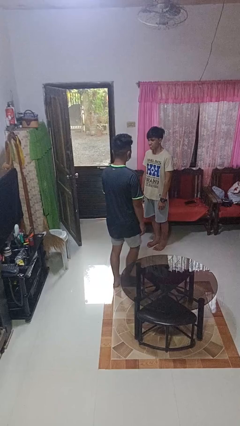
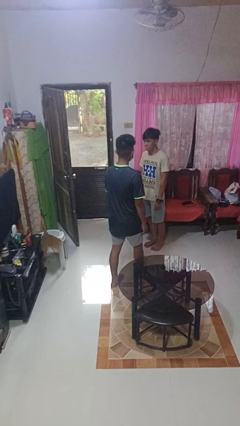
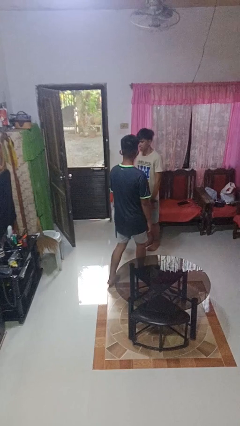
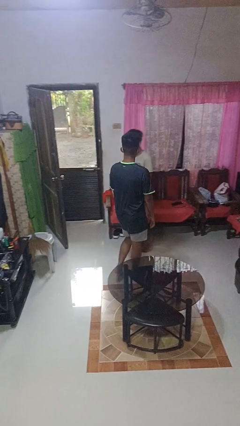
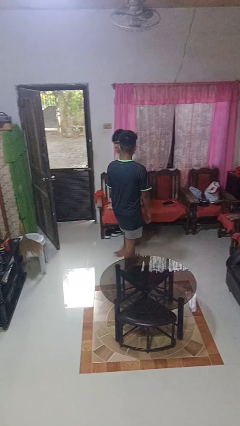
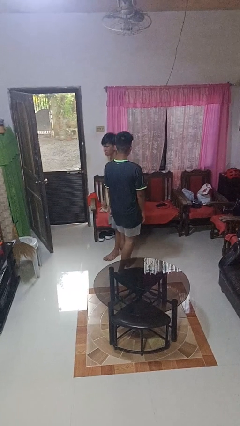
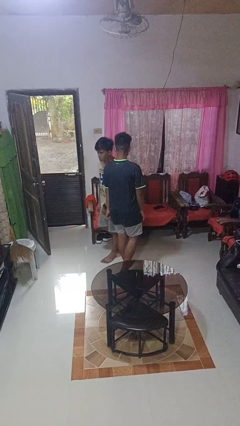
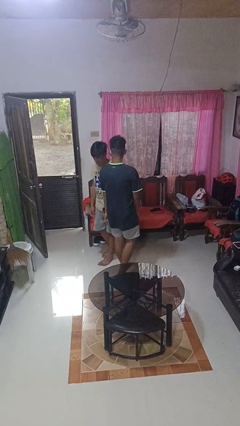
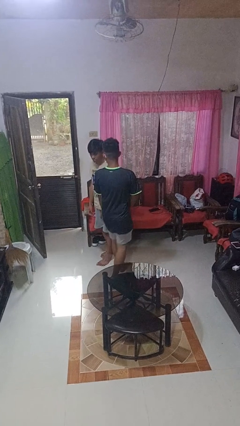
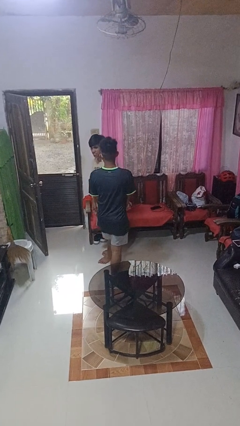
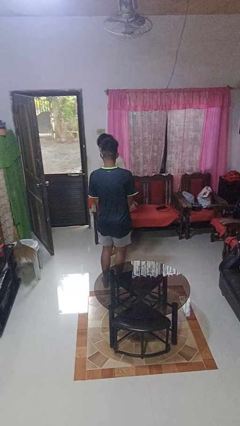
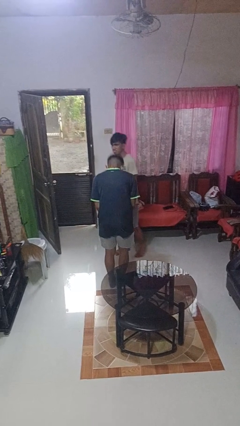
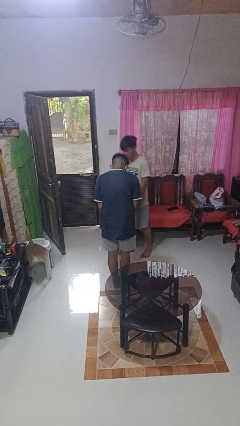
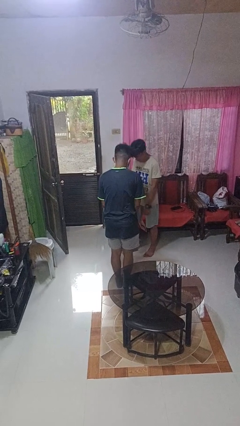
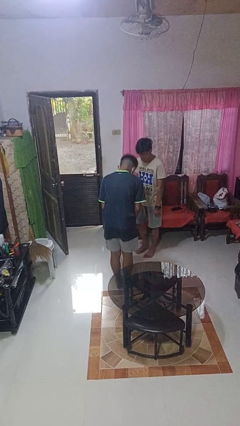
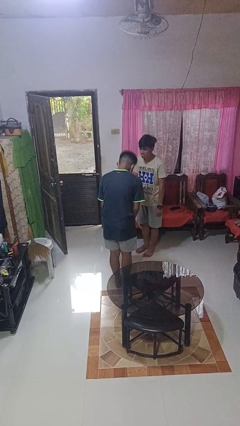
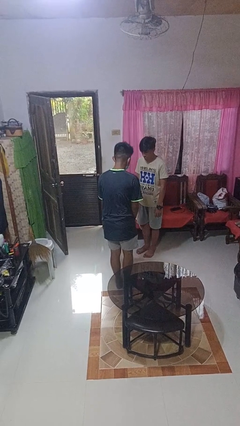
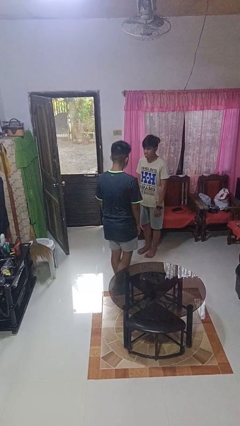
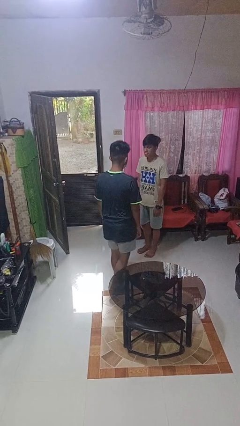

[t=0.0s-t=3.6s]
person bumps into person

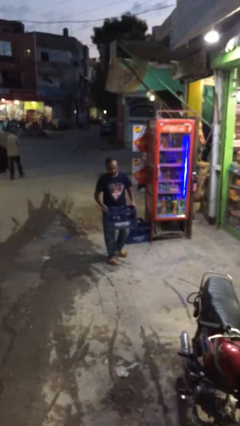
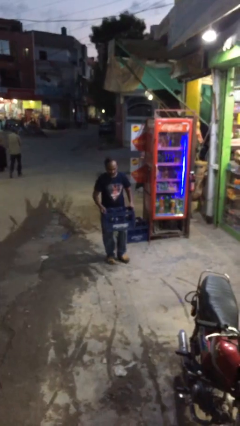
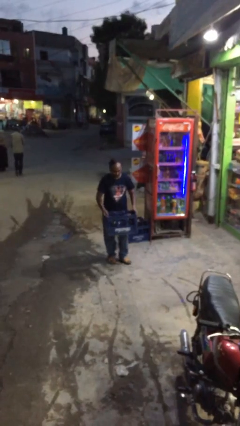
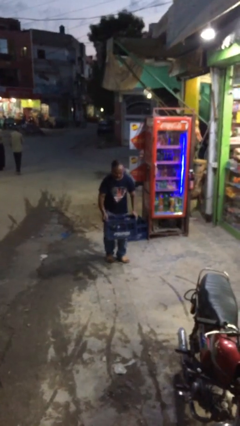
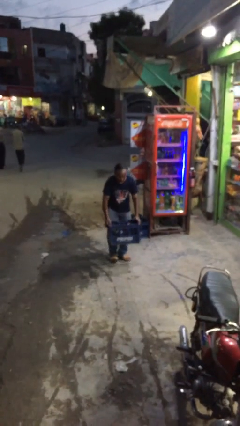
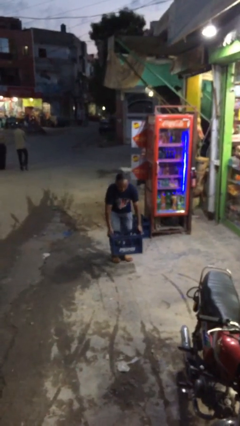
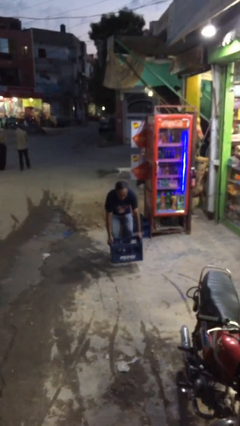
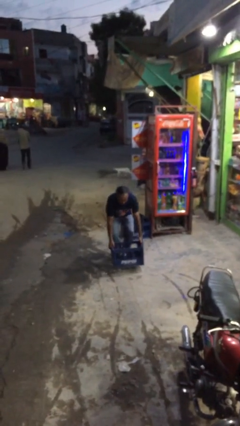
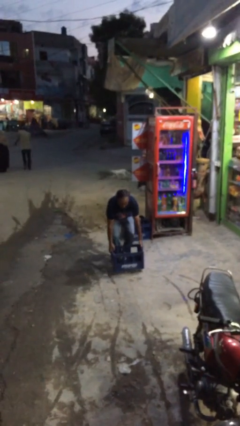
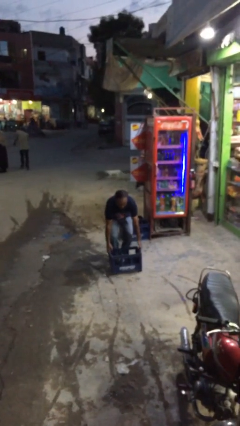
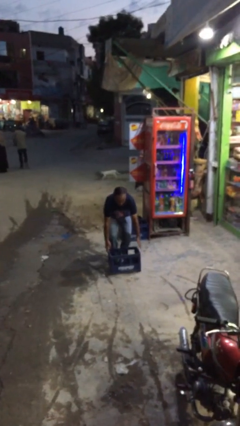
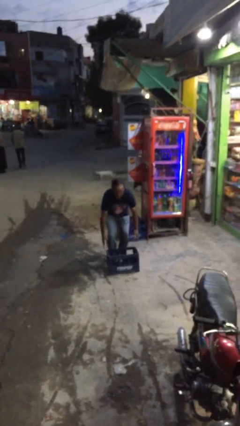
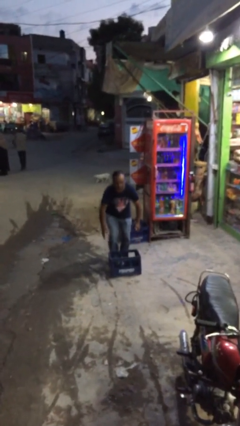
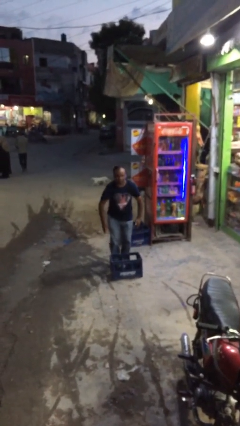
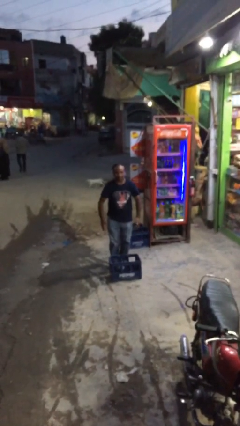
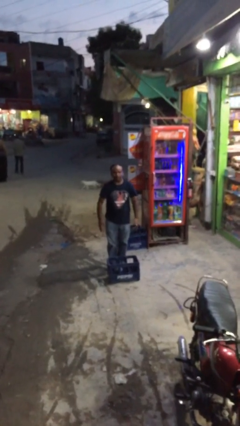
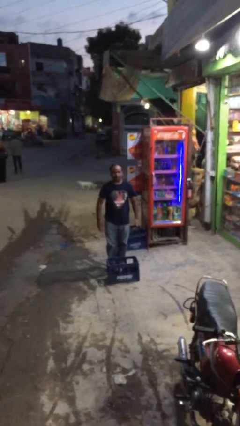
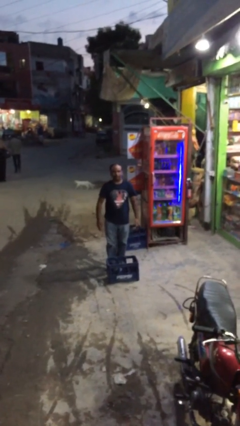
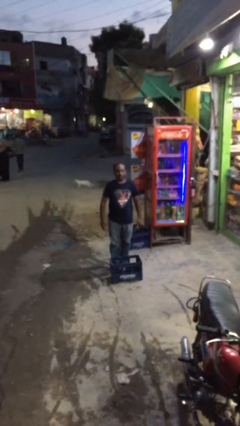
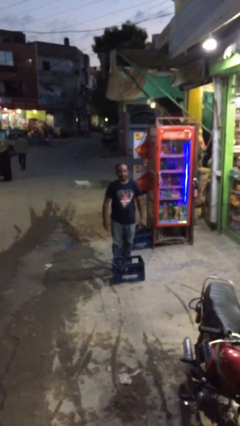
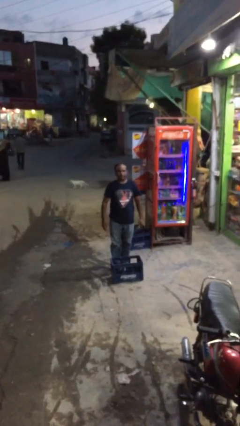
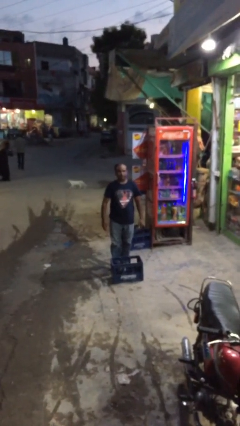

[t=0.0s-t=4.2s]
person puts down object on floor

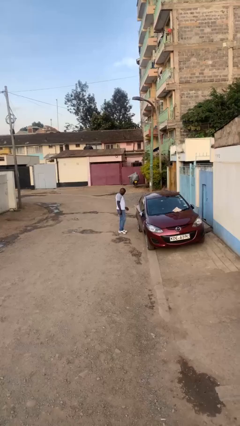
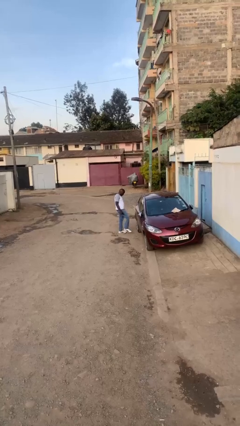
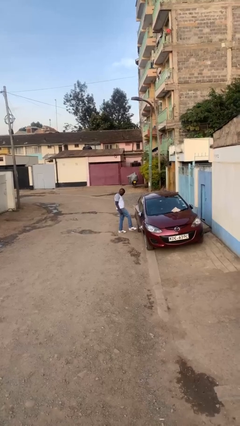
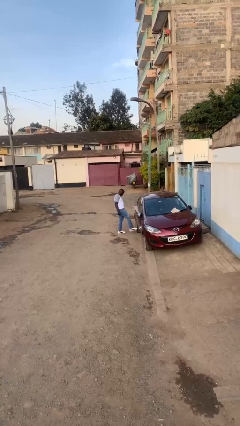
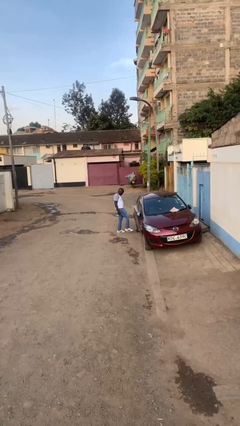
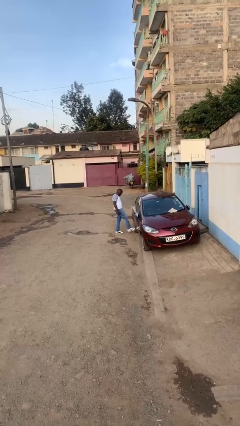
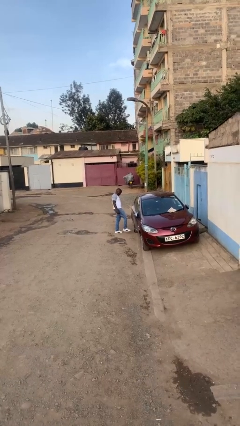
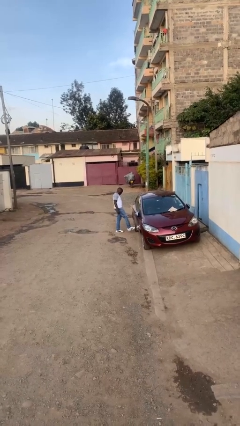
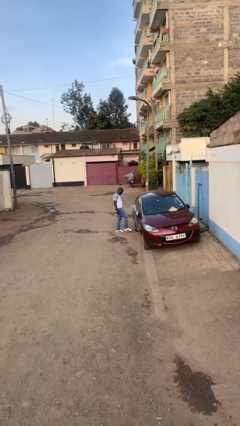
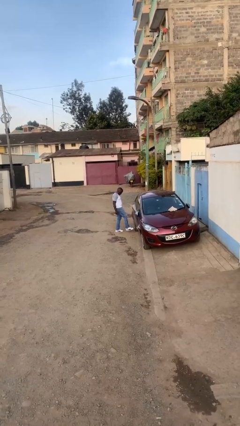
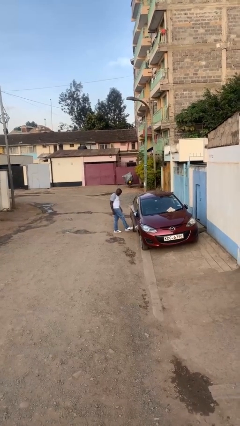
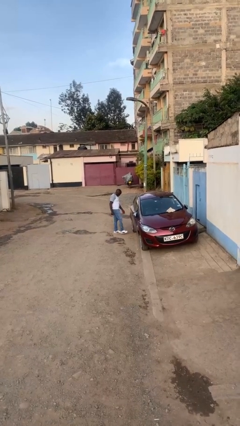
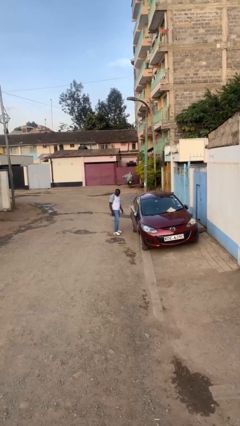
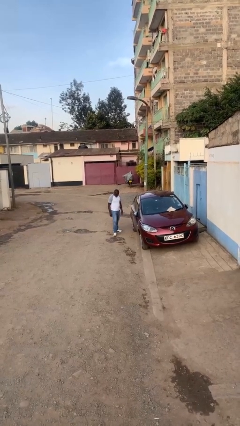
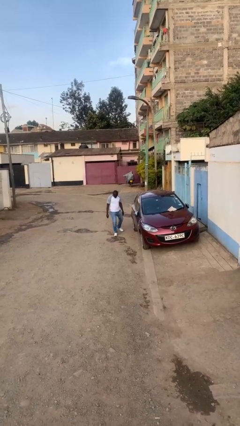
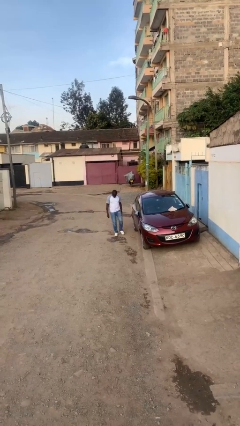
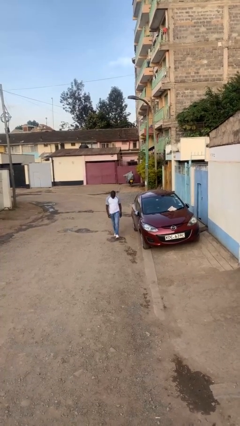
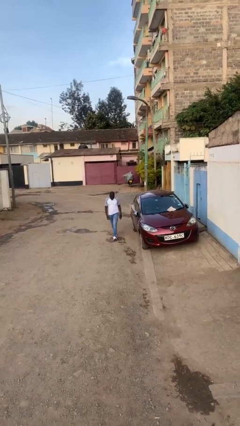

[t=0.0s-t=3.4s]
person kicks car tires

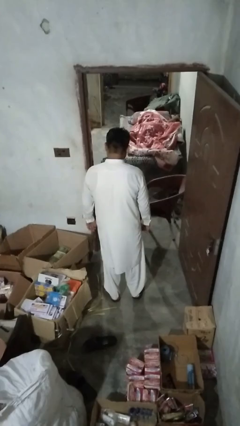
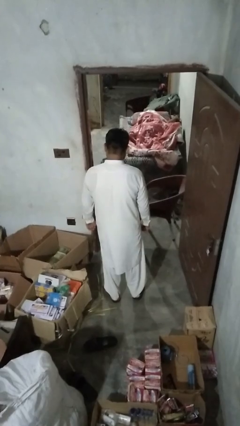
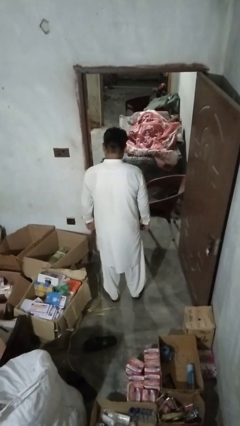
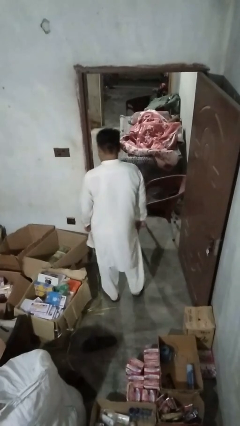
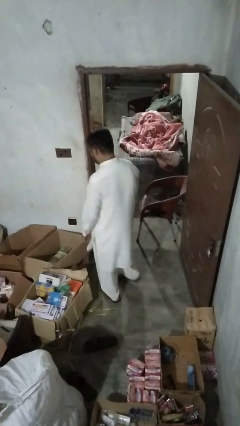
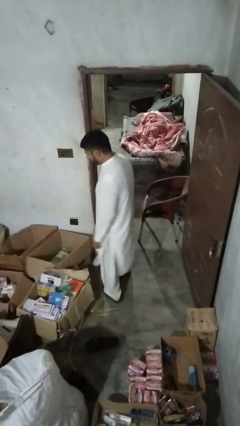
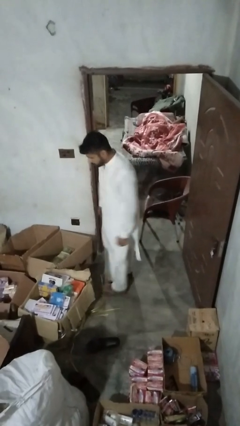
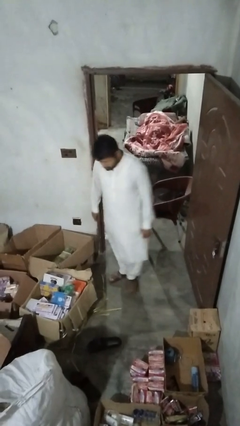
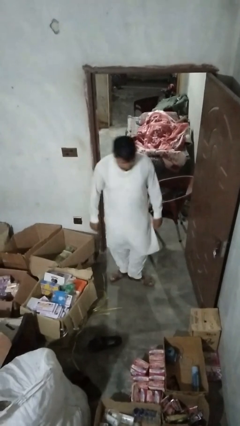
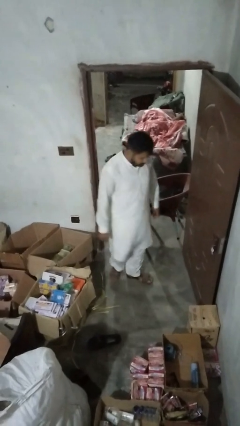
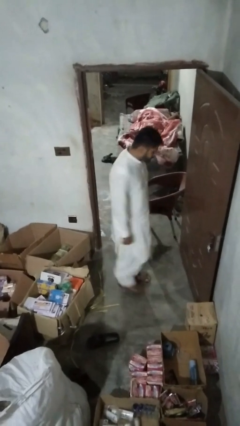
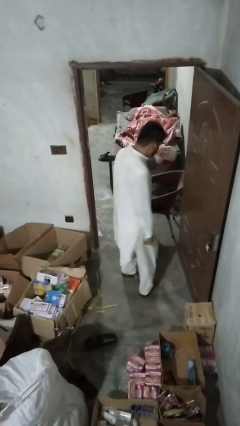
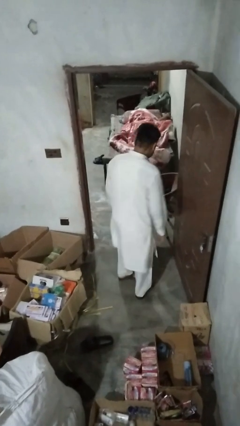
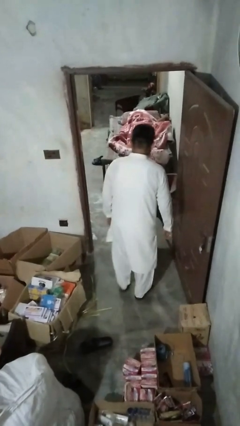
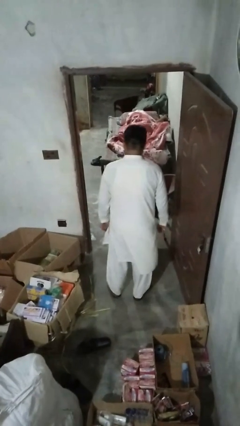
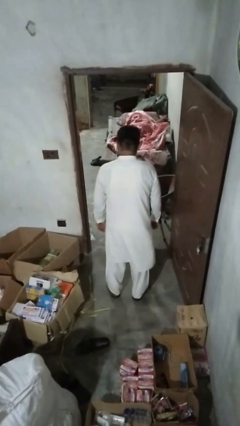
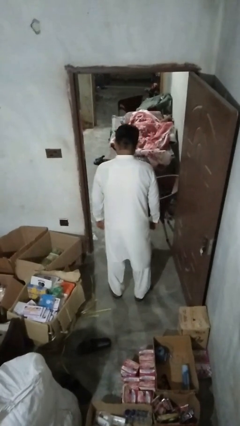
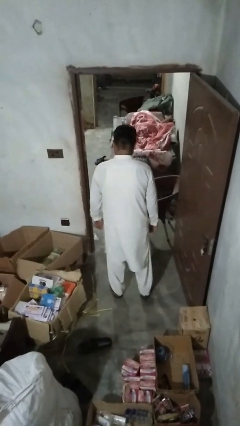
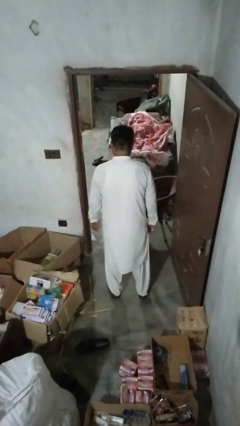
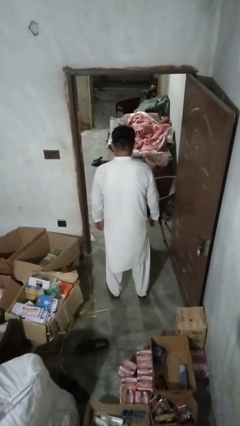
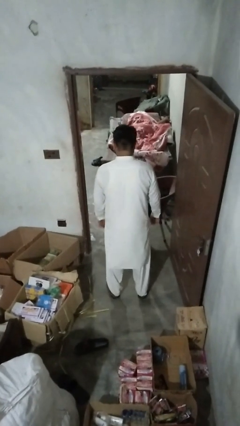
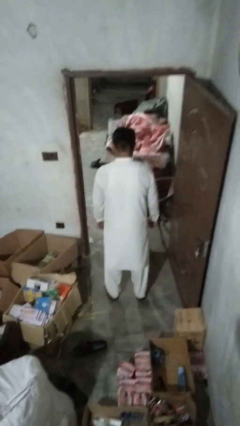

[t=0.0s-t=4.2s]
person twirls

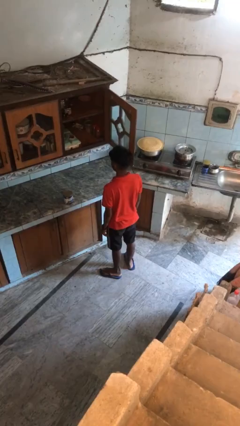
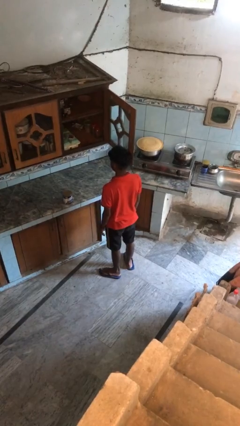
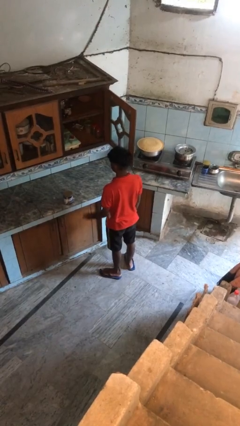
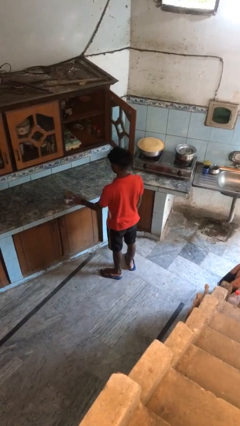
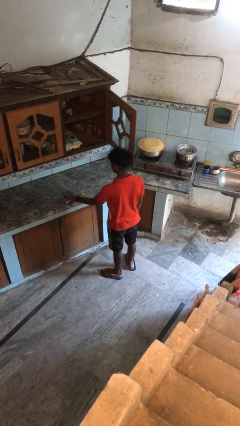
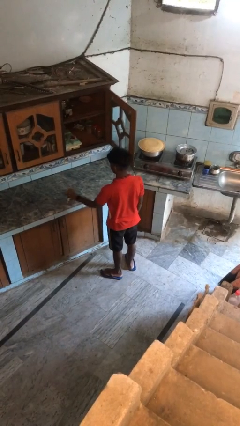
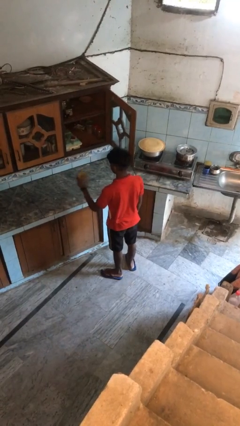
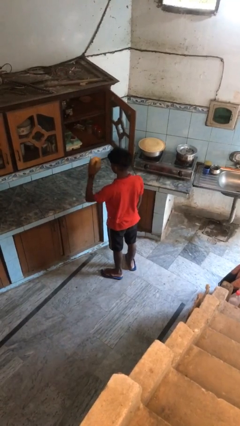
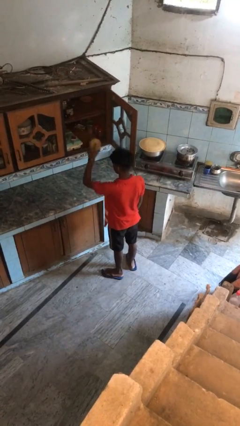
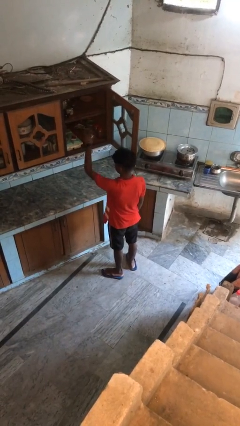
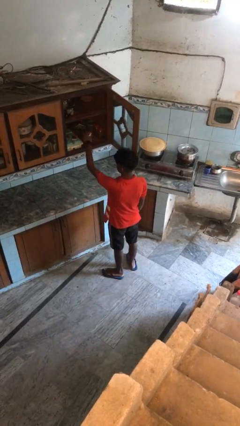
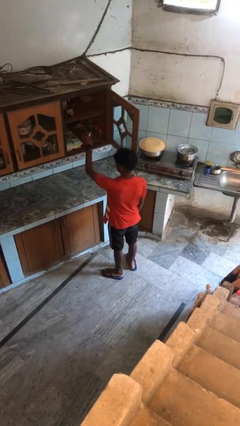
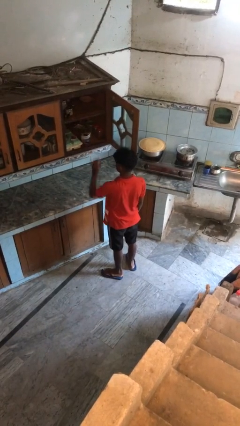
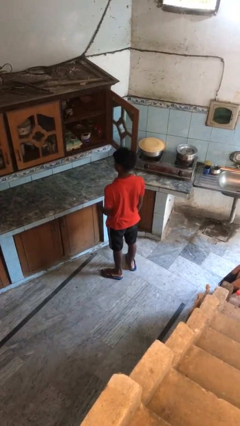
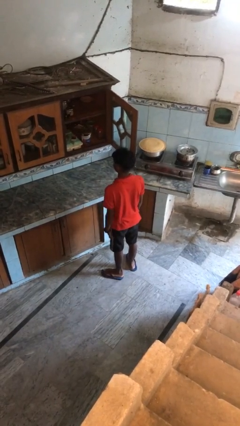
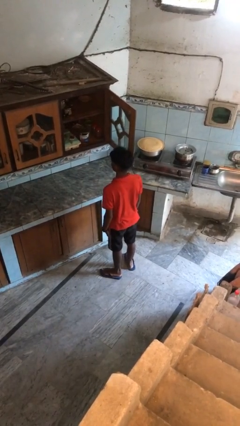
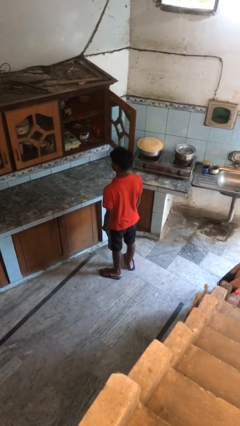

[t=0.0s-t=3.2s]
person puts object in cabinet
